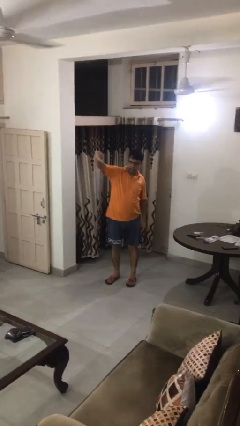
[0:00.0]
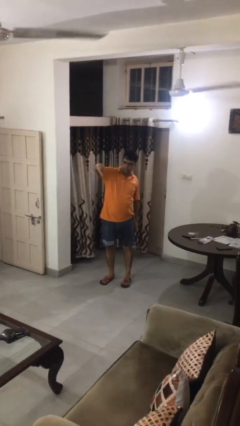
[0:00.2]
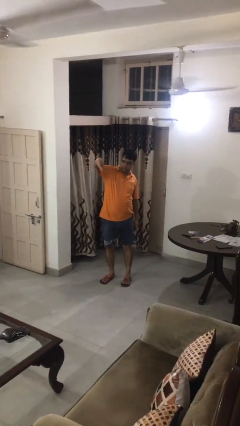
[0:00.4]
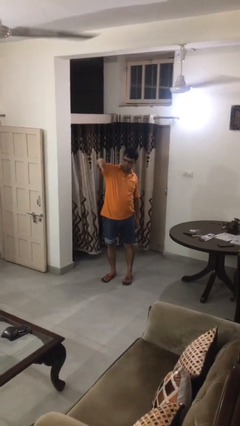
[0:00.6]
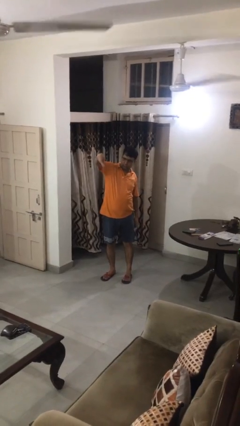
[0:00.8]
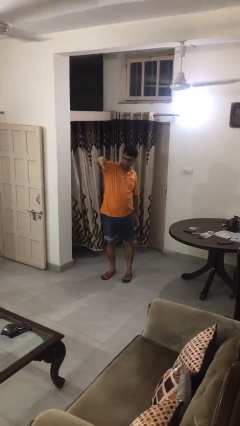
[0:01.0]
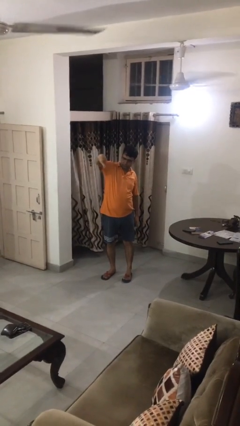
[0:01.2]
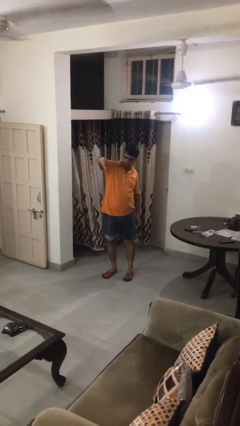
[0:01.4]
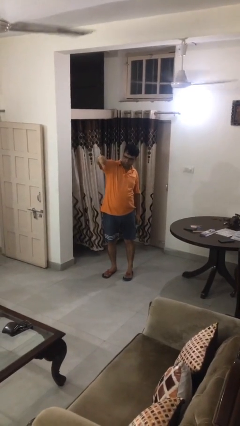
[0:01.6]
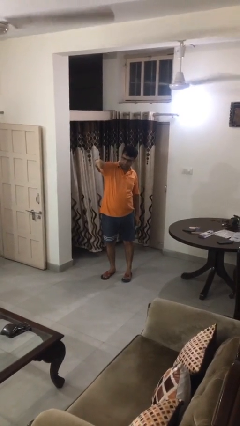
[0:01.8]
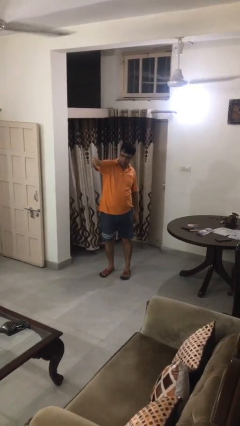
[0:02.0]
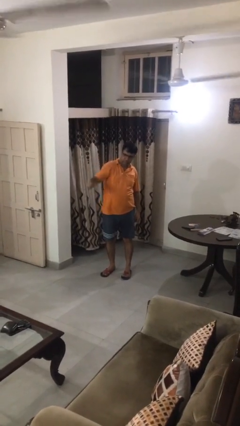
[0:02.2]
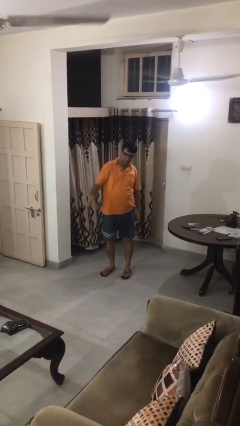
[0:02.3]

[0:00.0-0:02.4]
person gestures thumbs down

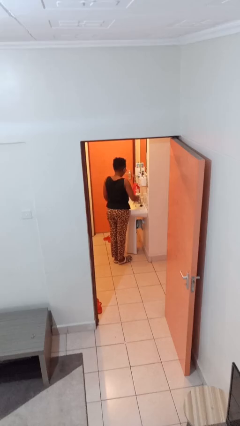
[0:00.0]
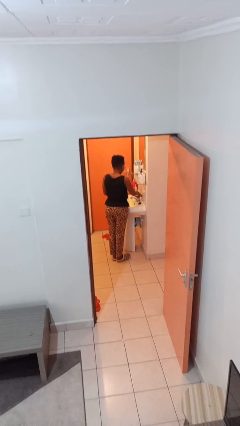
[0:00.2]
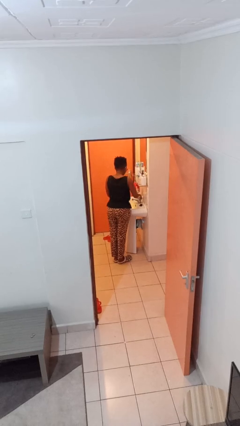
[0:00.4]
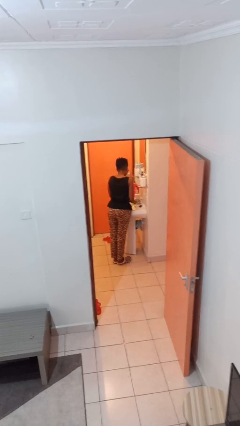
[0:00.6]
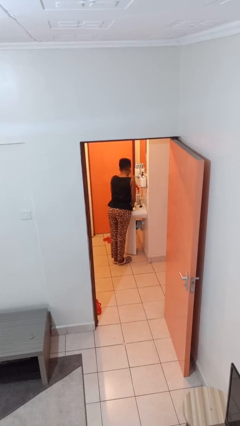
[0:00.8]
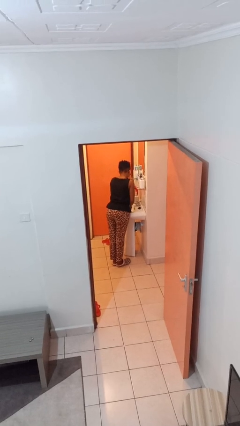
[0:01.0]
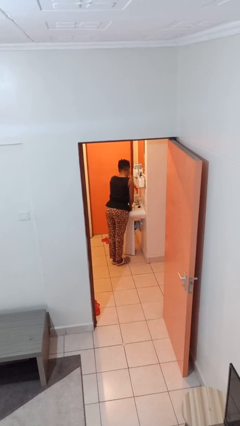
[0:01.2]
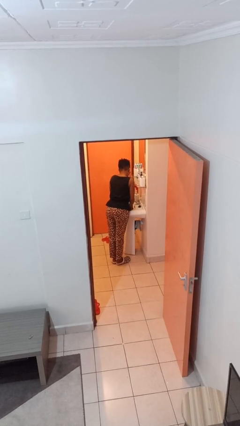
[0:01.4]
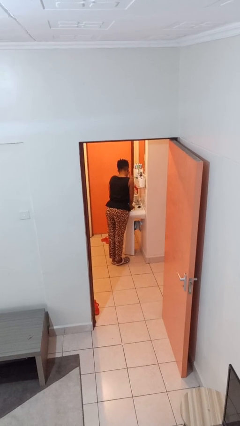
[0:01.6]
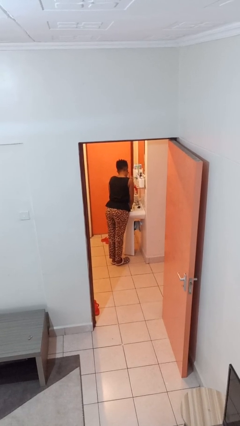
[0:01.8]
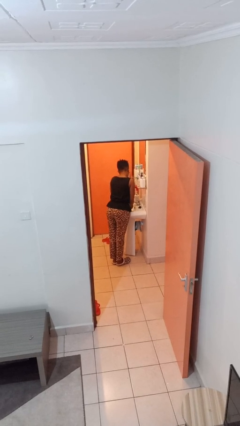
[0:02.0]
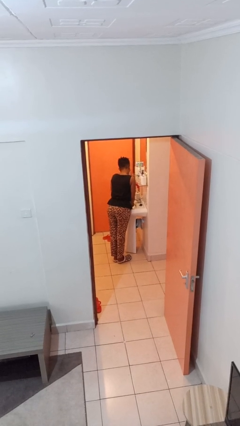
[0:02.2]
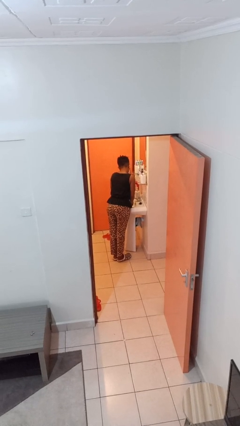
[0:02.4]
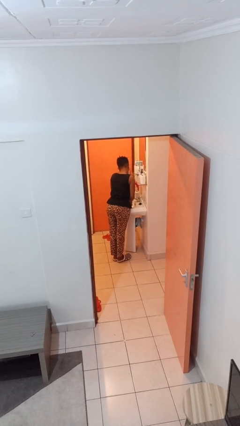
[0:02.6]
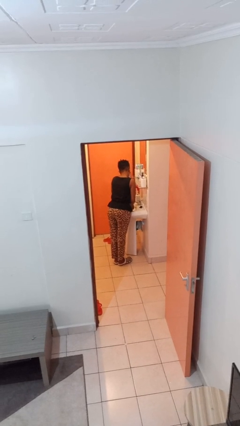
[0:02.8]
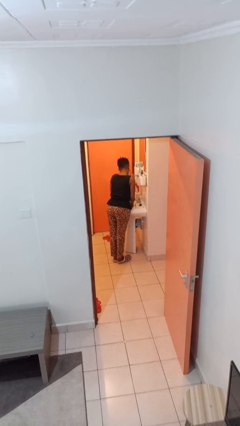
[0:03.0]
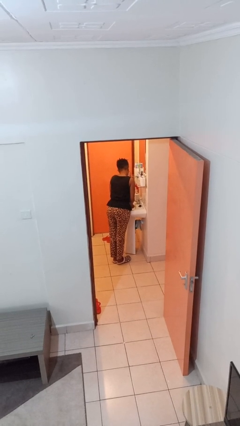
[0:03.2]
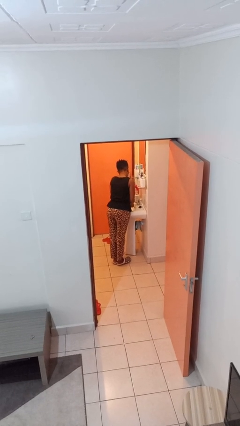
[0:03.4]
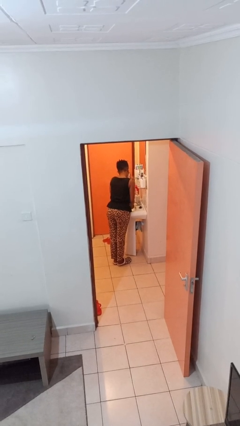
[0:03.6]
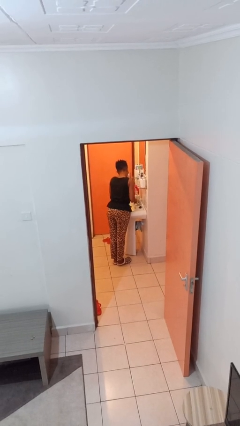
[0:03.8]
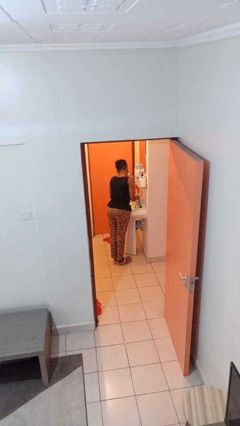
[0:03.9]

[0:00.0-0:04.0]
person washes hands

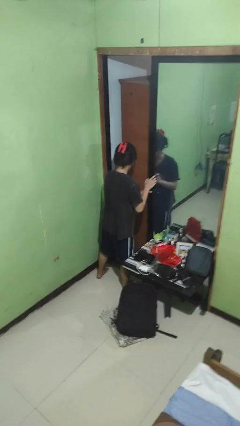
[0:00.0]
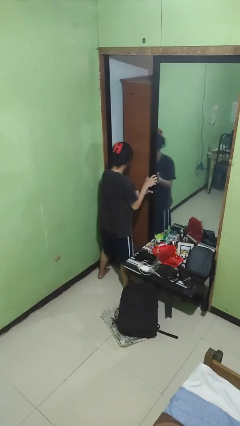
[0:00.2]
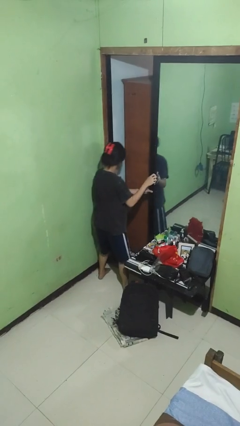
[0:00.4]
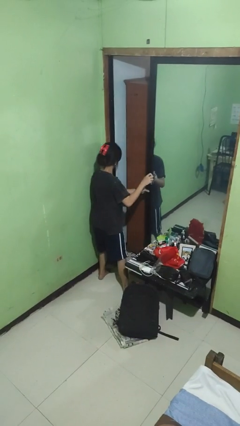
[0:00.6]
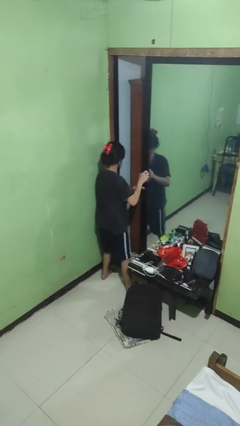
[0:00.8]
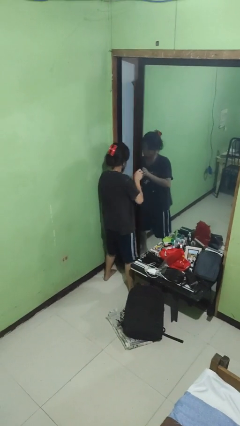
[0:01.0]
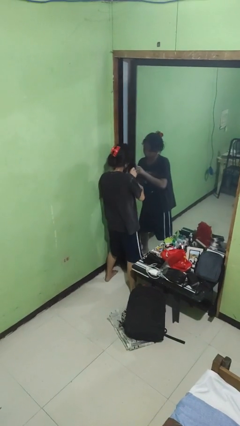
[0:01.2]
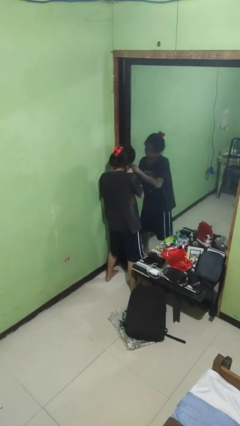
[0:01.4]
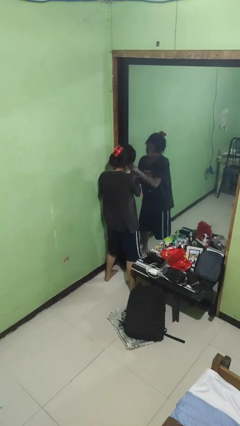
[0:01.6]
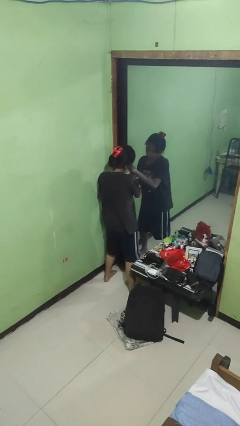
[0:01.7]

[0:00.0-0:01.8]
person closes sliding door

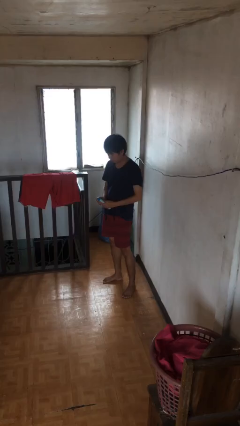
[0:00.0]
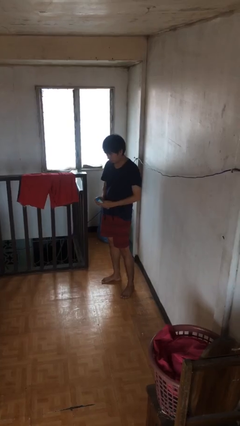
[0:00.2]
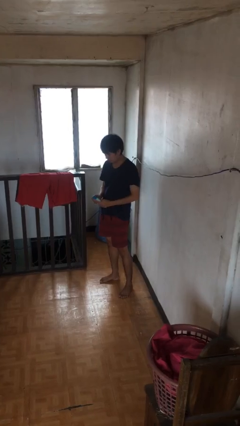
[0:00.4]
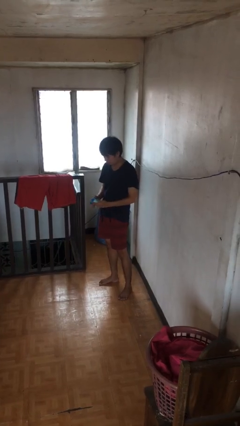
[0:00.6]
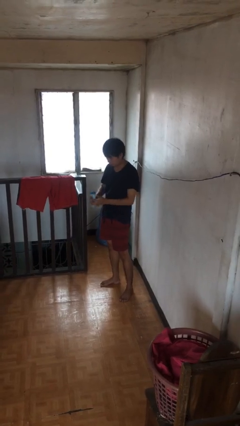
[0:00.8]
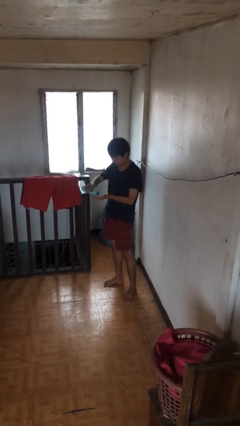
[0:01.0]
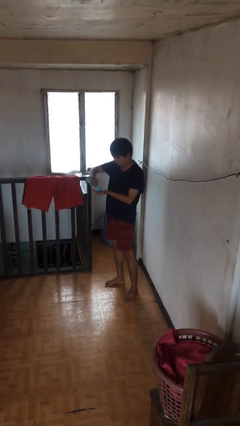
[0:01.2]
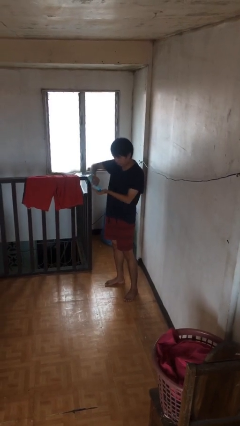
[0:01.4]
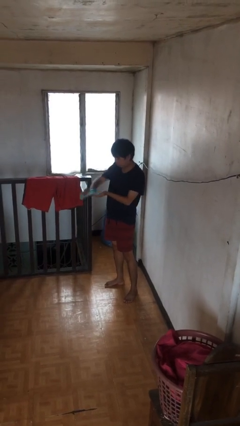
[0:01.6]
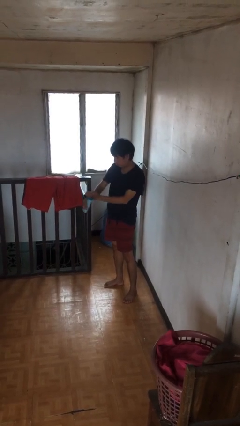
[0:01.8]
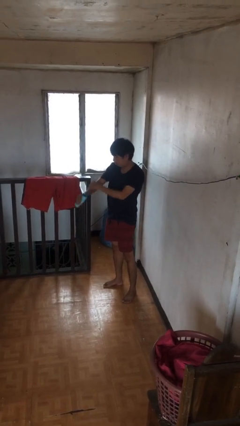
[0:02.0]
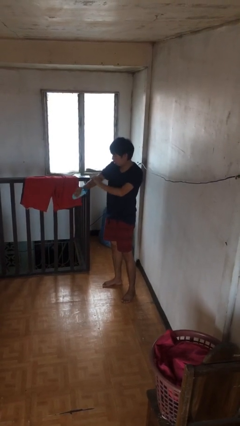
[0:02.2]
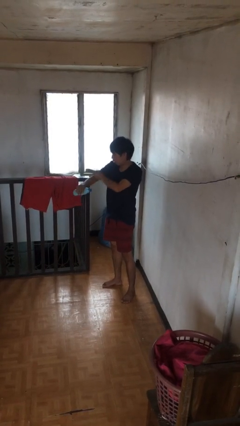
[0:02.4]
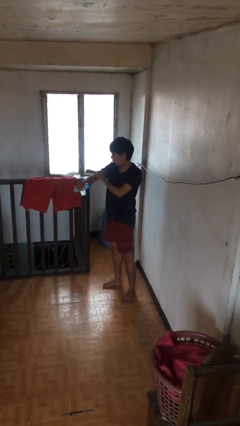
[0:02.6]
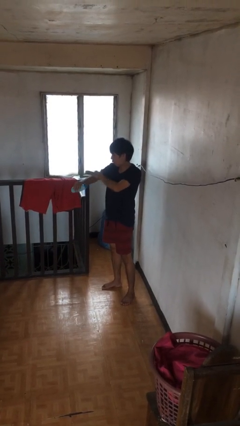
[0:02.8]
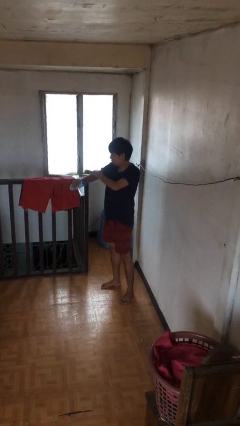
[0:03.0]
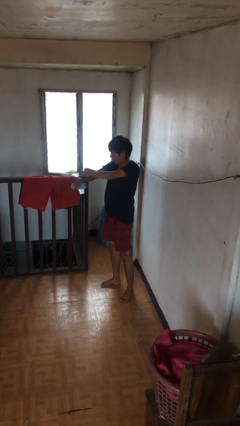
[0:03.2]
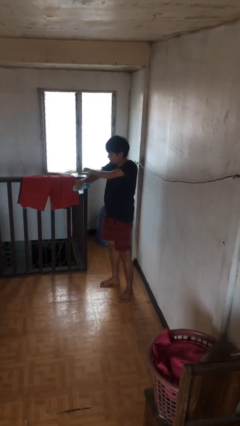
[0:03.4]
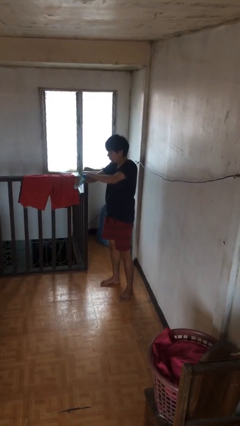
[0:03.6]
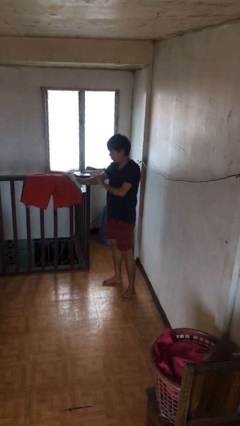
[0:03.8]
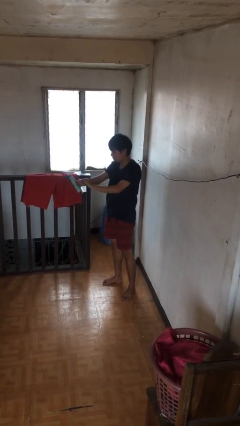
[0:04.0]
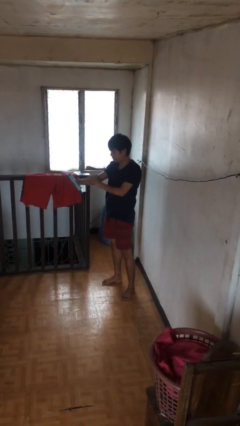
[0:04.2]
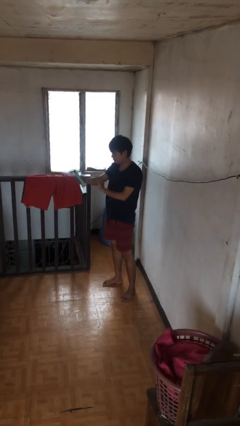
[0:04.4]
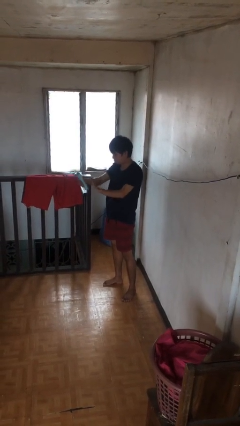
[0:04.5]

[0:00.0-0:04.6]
person applies sunscreen

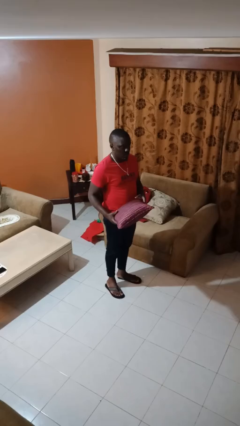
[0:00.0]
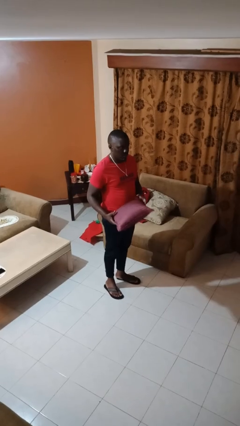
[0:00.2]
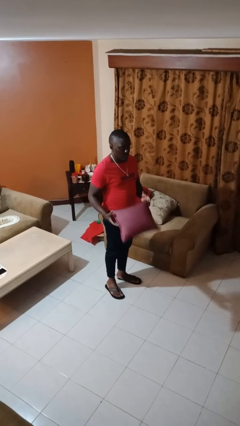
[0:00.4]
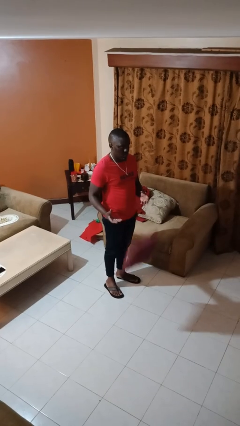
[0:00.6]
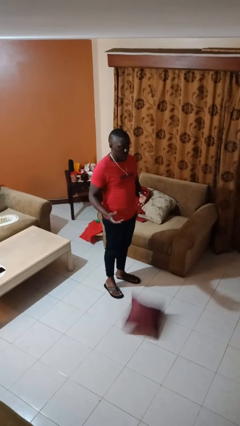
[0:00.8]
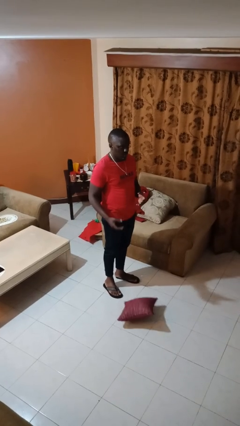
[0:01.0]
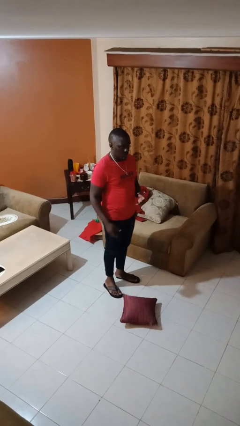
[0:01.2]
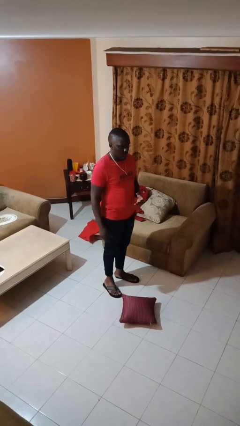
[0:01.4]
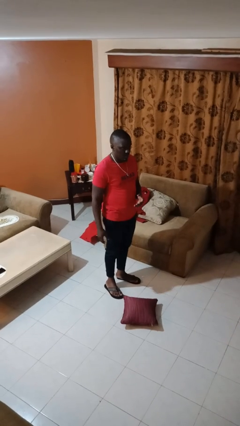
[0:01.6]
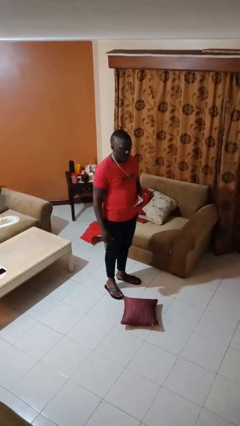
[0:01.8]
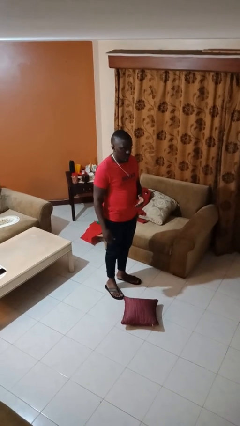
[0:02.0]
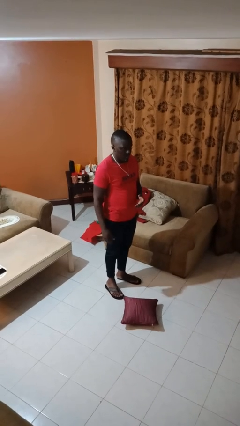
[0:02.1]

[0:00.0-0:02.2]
person drops object

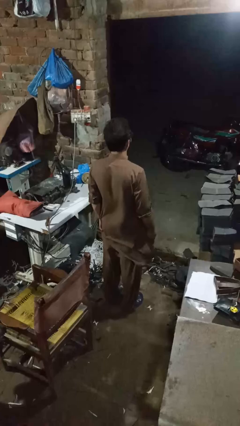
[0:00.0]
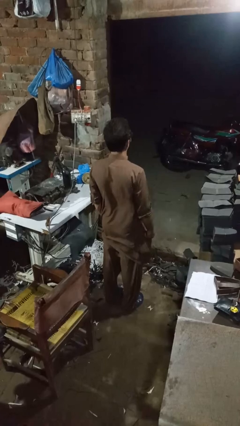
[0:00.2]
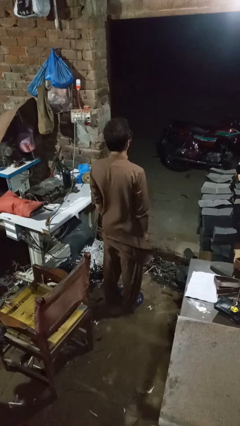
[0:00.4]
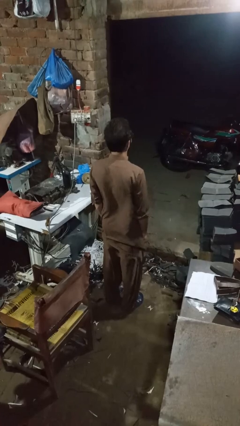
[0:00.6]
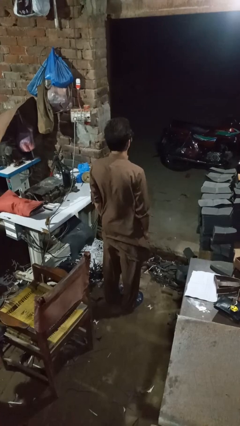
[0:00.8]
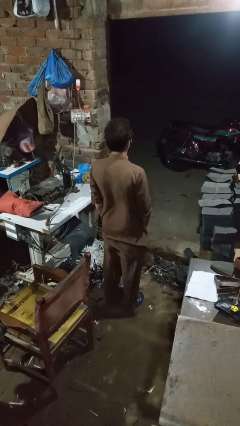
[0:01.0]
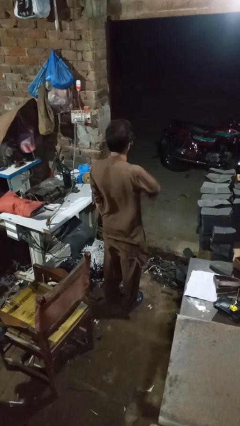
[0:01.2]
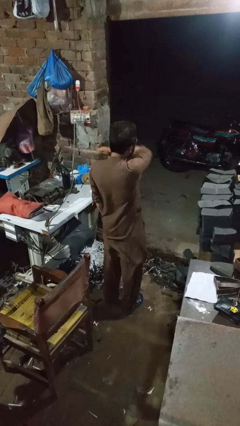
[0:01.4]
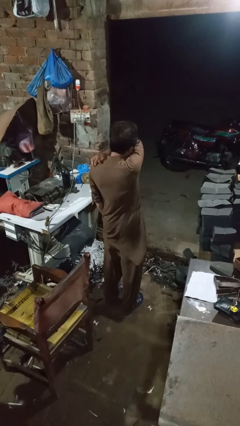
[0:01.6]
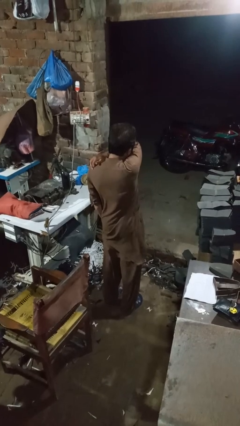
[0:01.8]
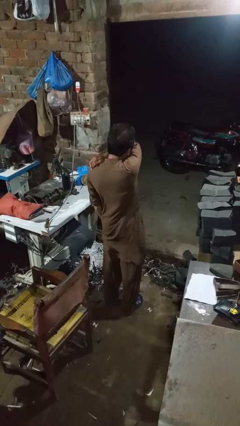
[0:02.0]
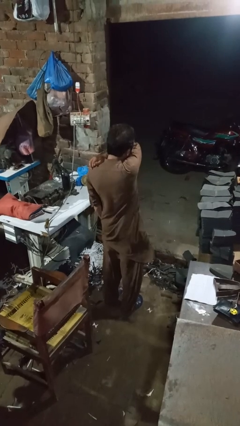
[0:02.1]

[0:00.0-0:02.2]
person sneezes into arm

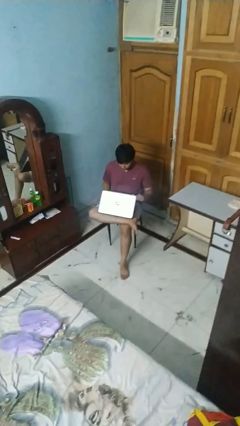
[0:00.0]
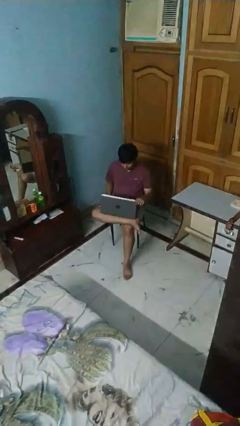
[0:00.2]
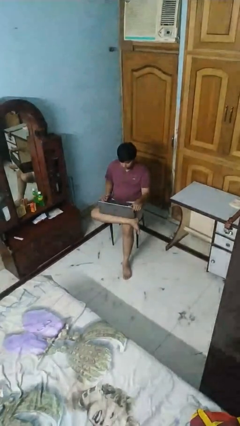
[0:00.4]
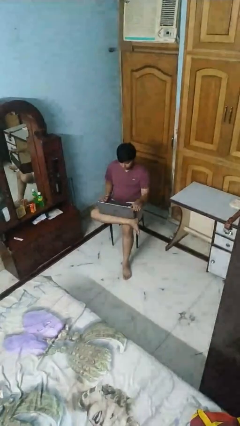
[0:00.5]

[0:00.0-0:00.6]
person opens laptop
